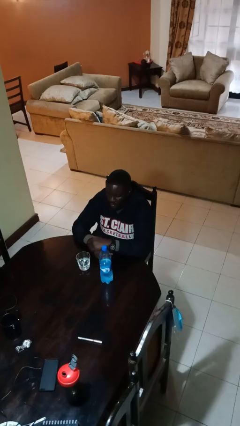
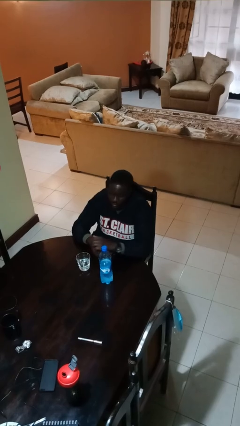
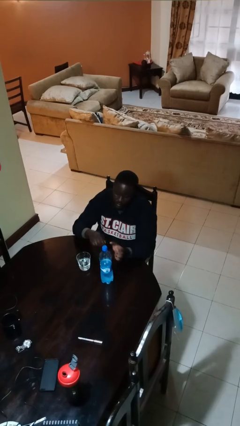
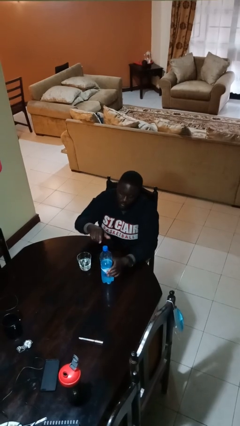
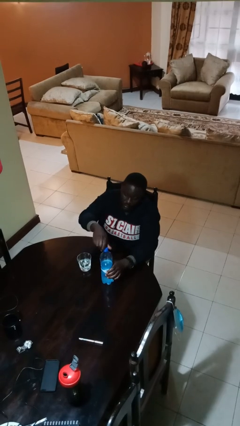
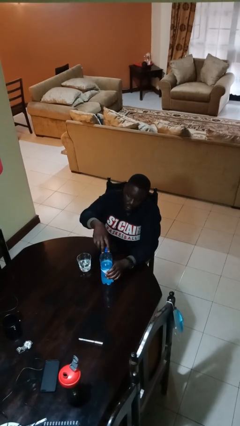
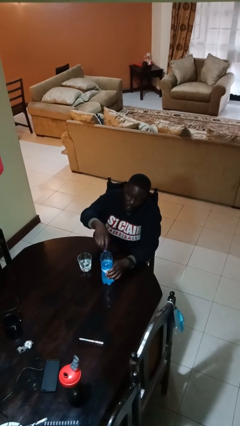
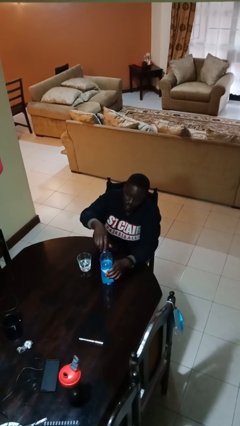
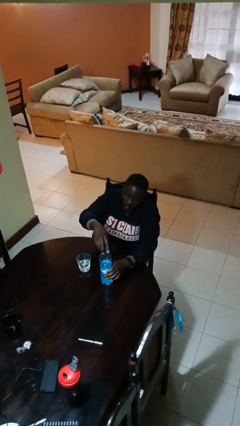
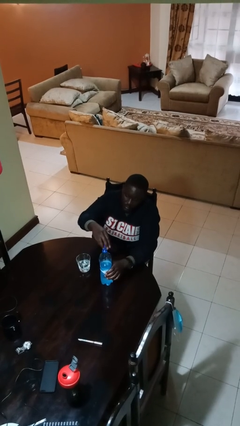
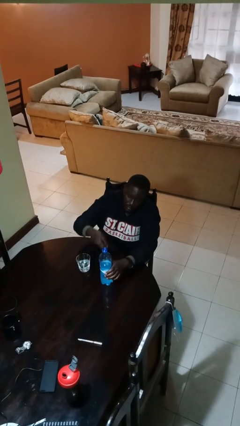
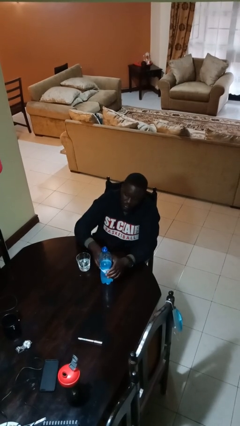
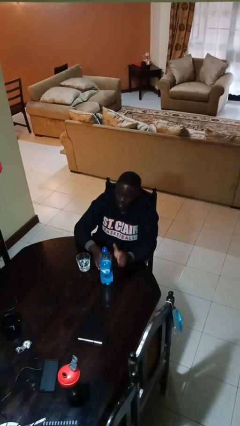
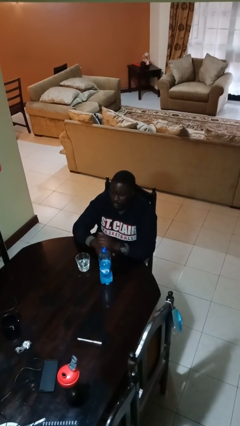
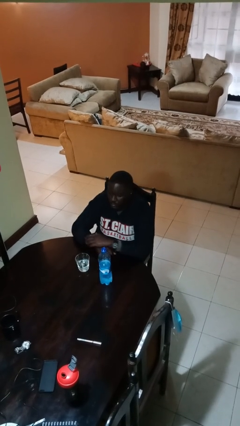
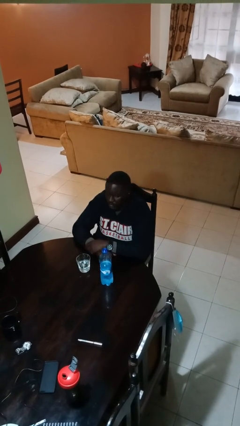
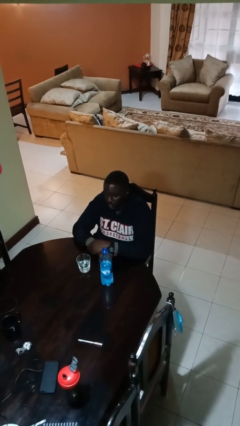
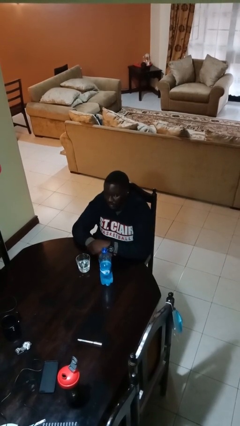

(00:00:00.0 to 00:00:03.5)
person unscrews lid from bottle

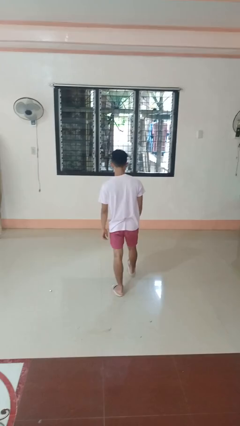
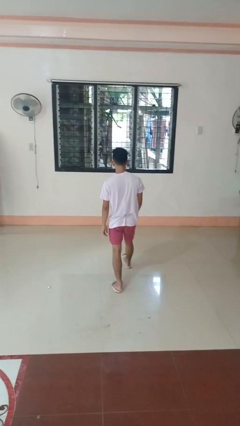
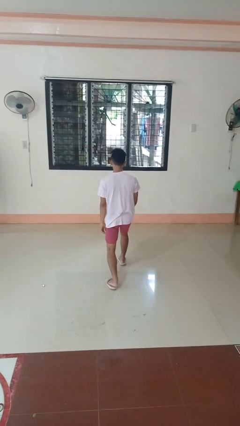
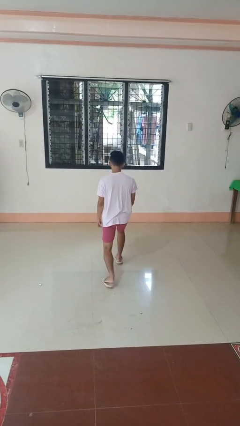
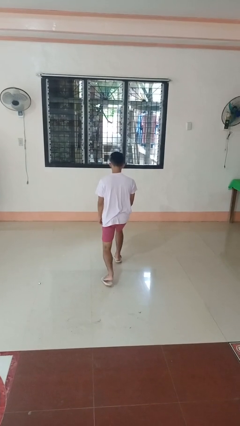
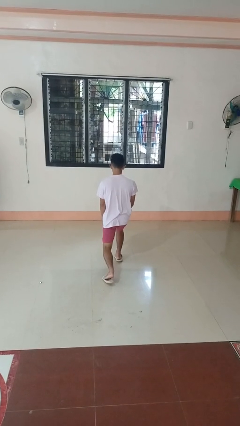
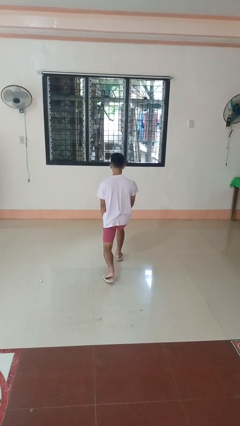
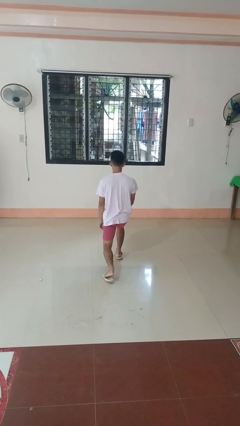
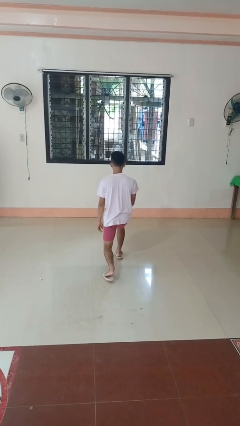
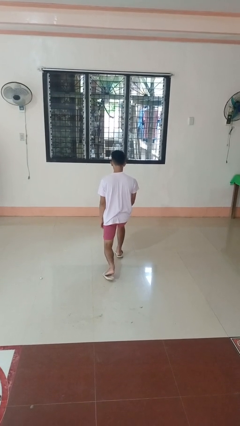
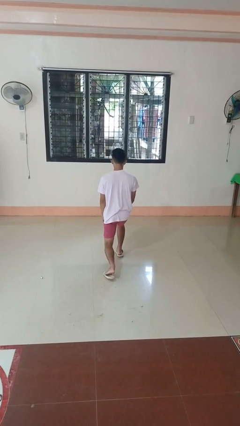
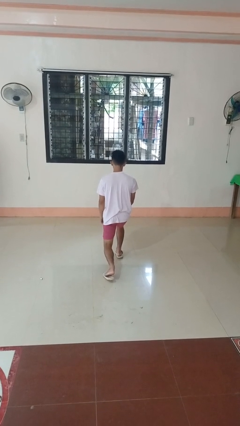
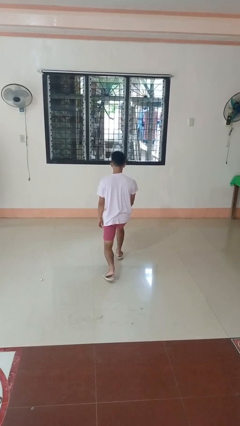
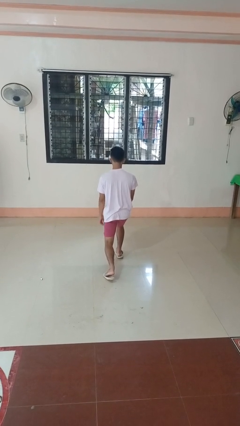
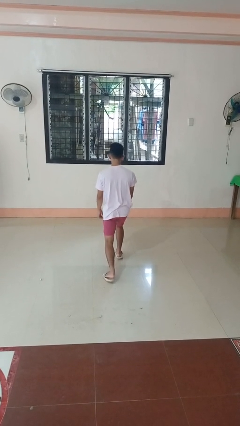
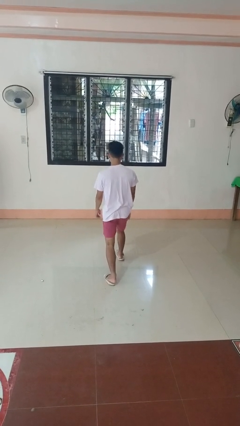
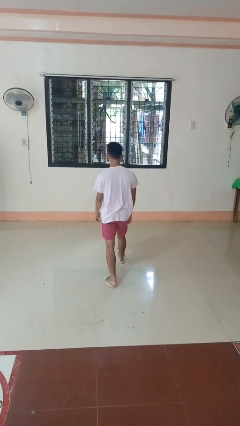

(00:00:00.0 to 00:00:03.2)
person exercises with lunges

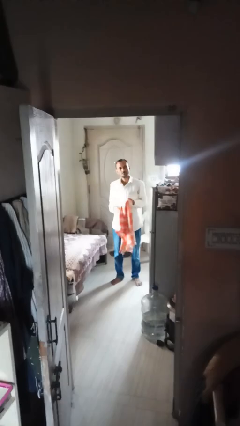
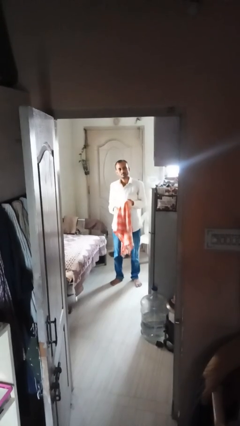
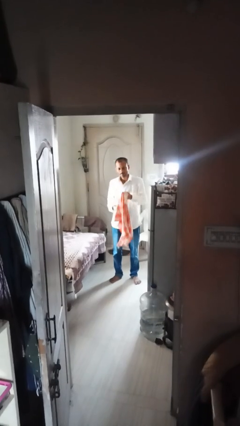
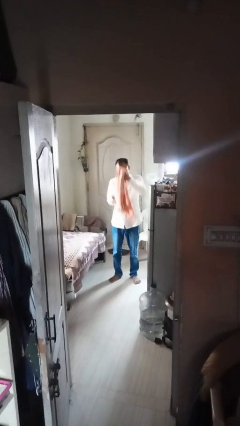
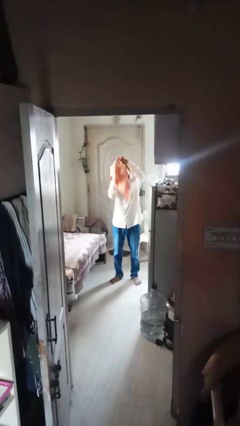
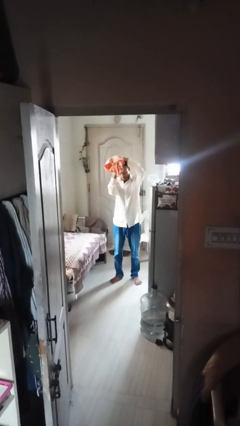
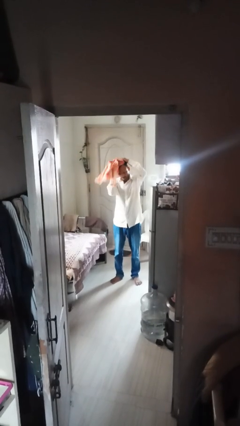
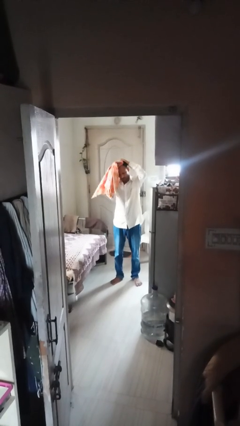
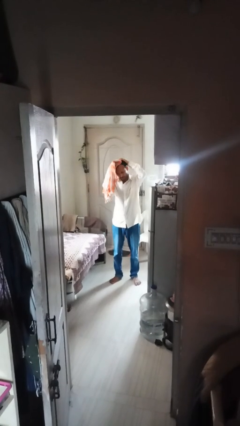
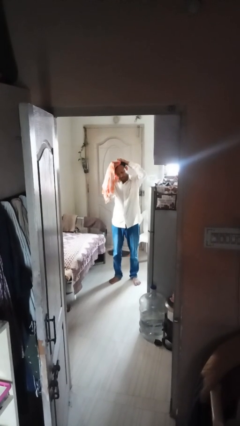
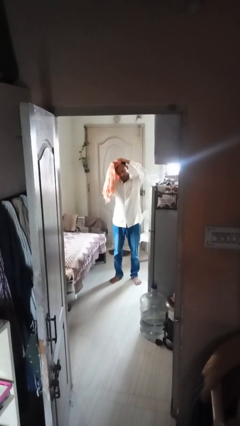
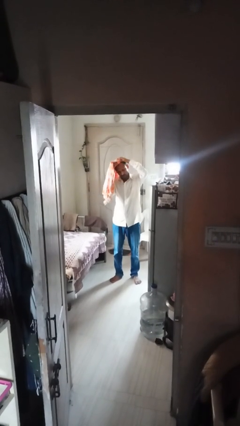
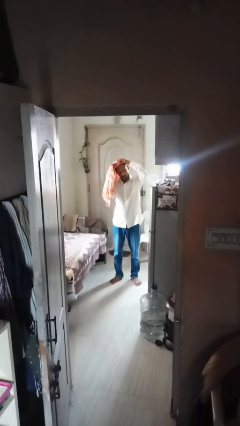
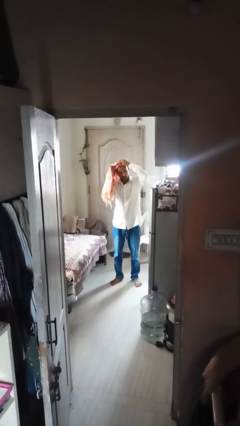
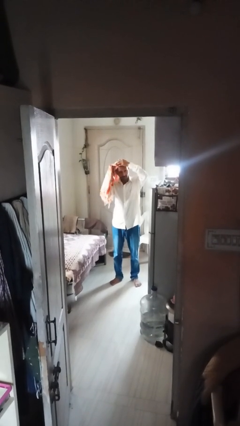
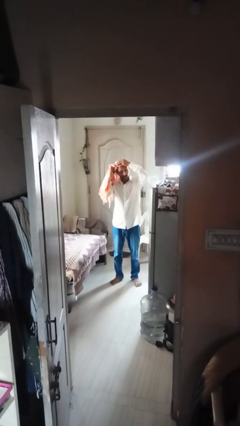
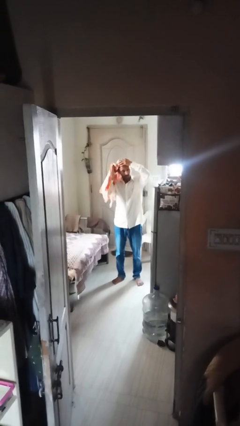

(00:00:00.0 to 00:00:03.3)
person dries hair with towel

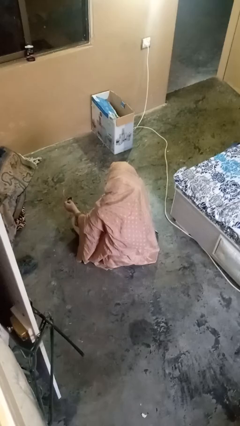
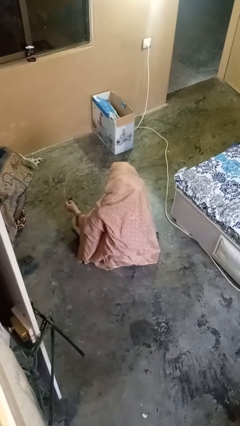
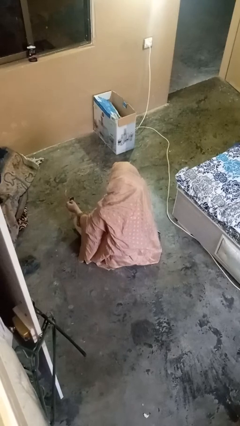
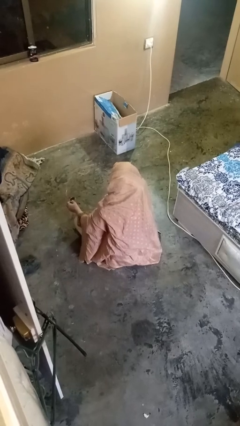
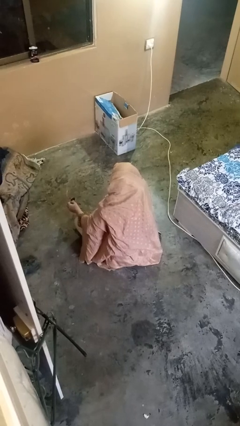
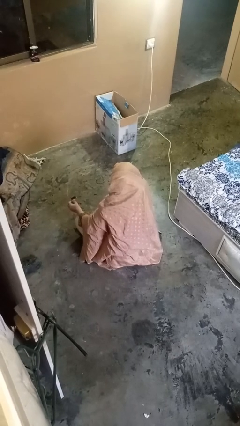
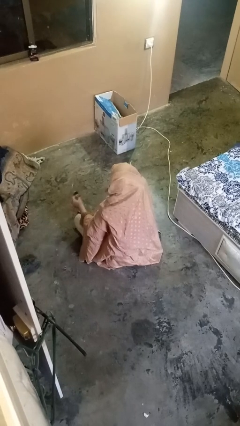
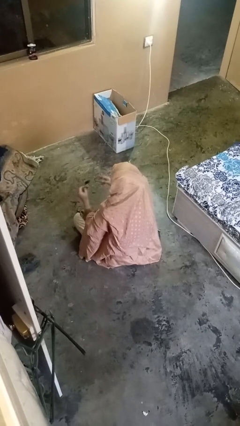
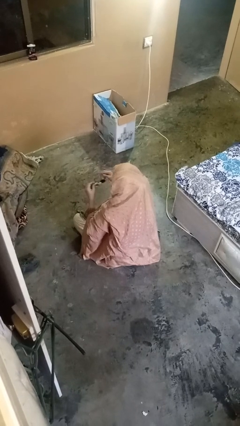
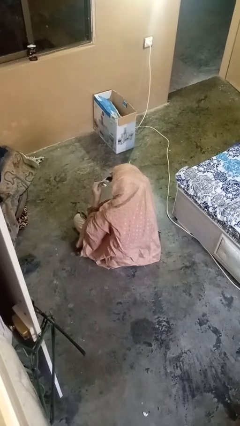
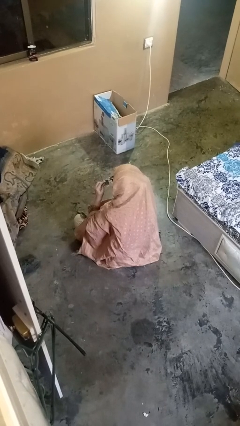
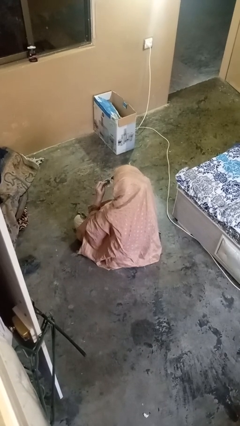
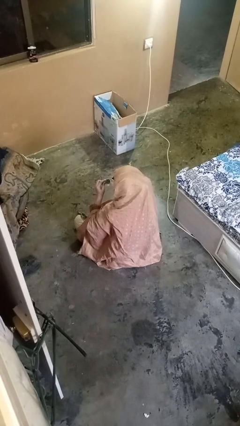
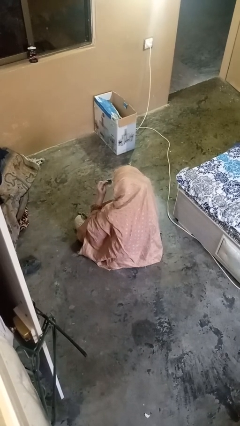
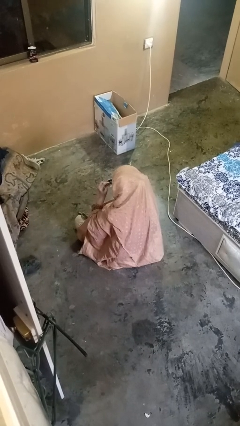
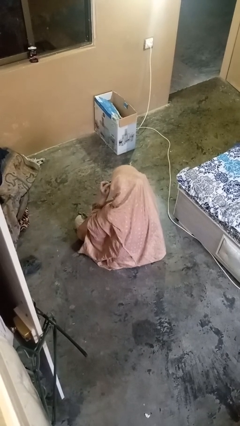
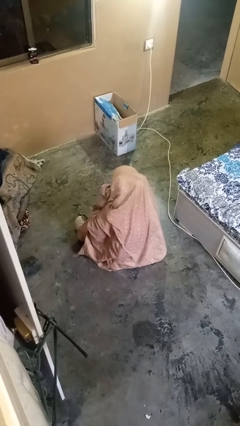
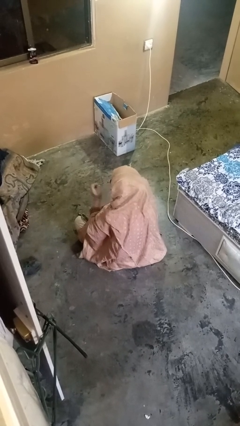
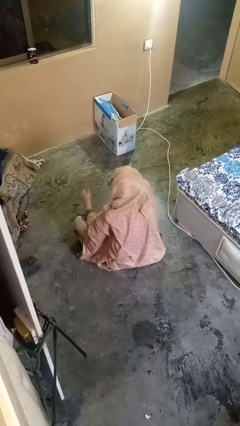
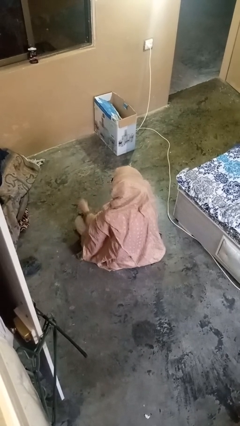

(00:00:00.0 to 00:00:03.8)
person puts on glasses

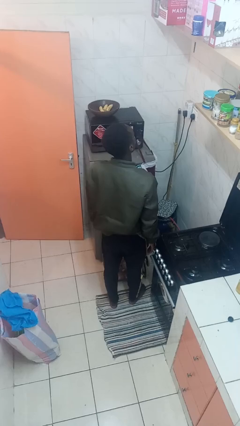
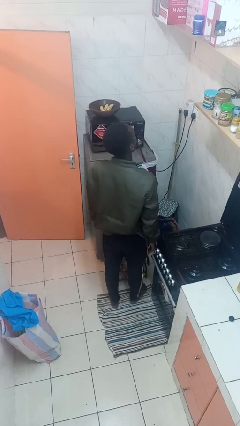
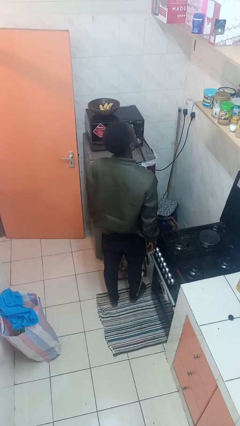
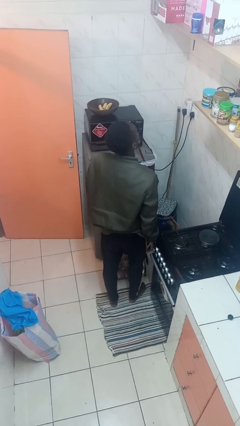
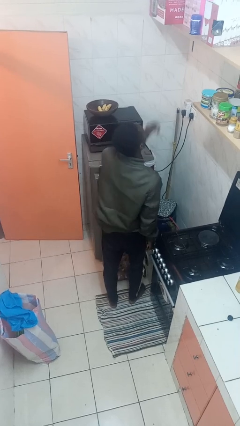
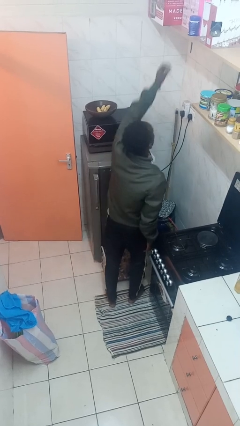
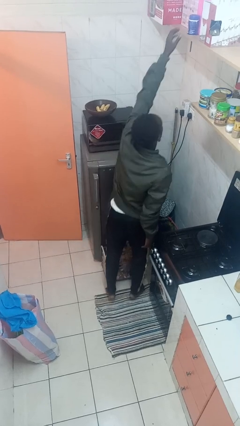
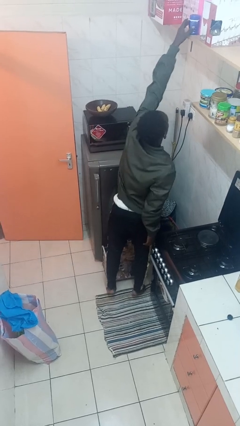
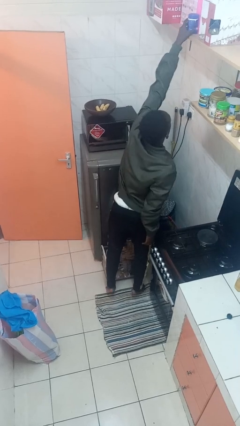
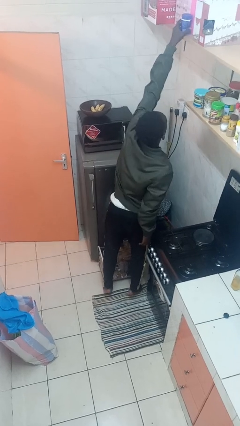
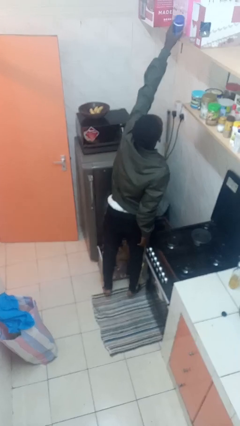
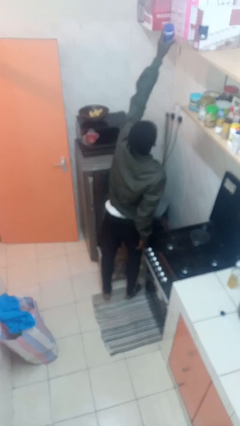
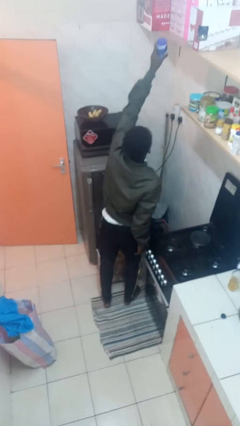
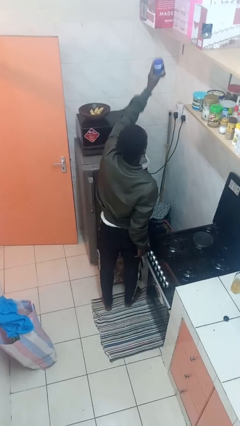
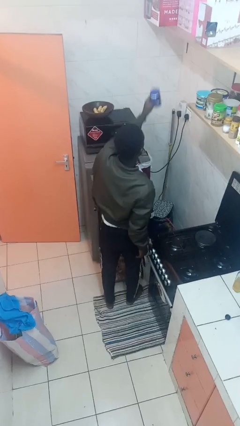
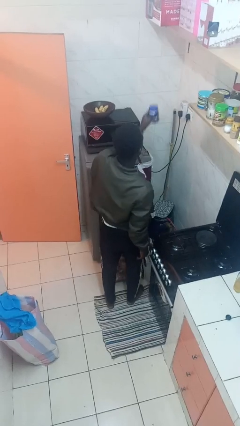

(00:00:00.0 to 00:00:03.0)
person picks up object from shelf

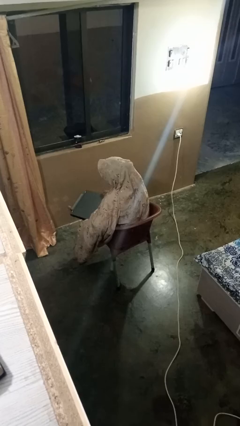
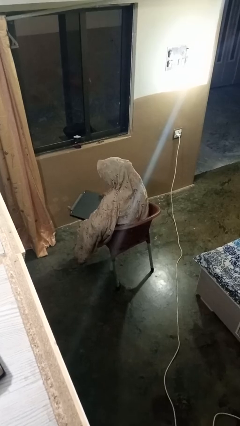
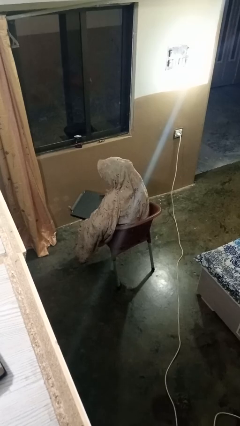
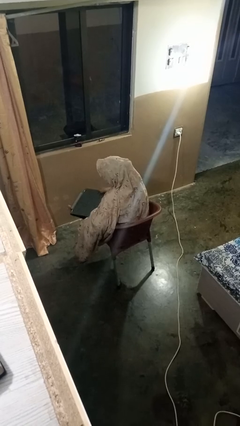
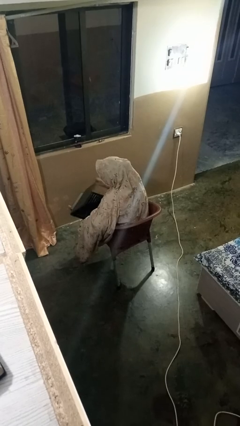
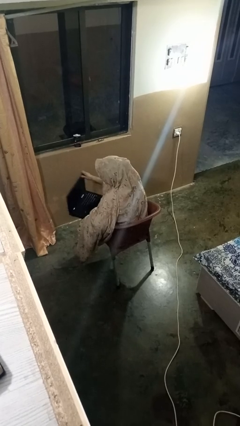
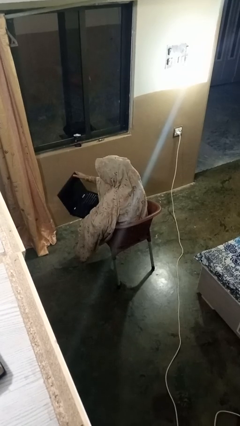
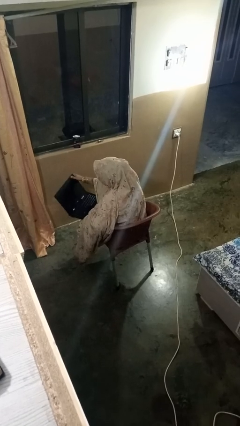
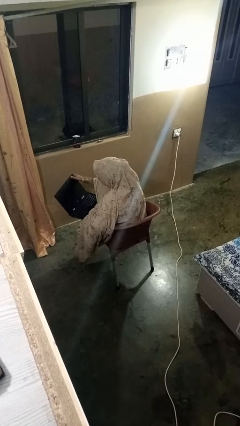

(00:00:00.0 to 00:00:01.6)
person opens laptop
